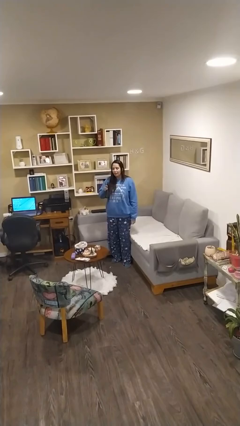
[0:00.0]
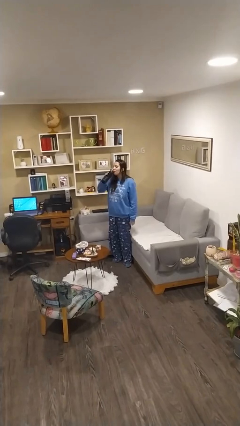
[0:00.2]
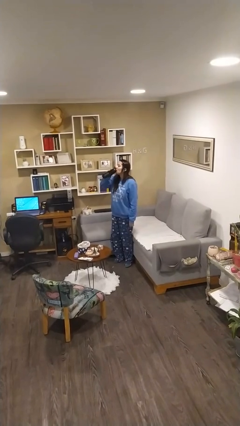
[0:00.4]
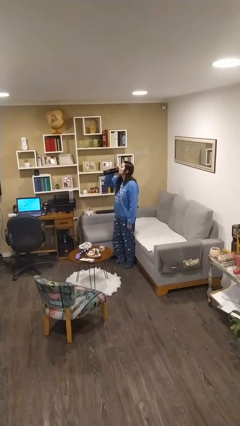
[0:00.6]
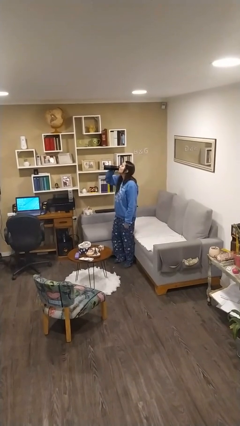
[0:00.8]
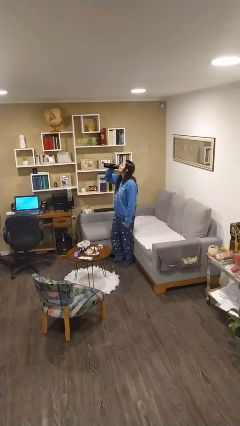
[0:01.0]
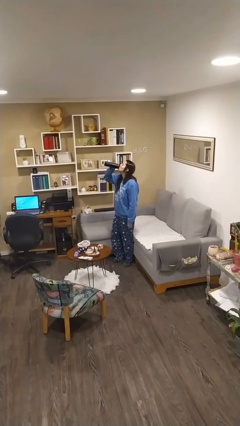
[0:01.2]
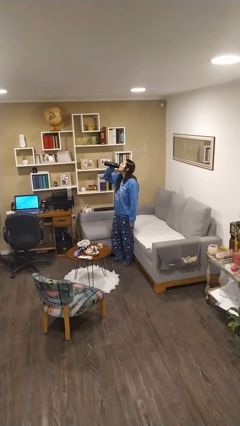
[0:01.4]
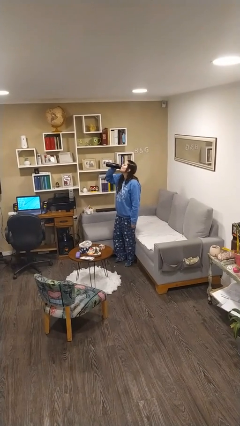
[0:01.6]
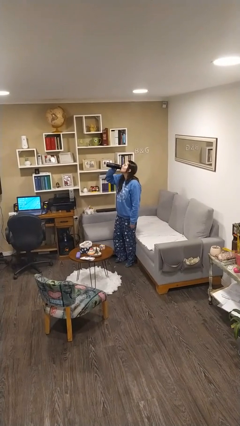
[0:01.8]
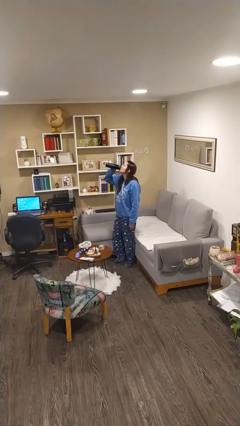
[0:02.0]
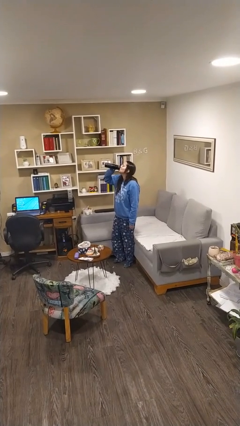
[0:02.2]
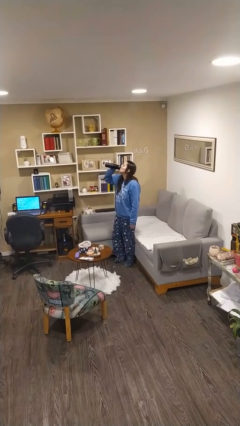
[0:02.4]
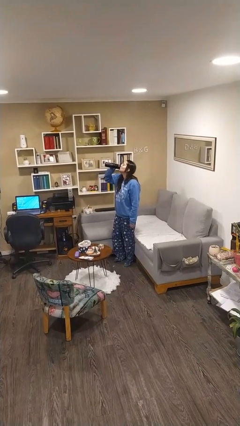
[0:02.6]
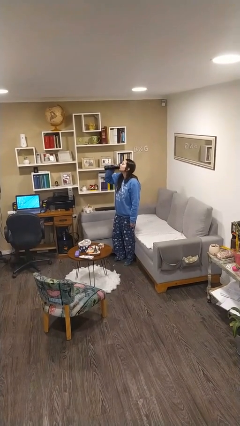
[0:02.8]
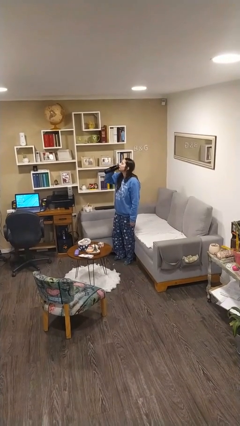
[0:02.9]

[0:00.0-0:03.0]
person drinks from bottle

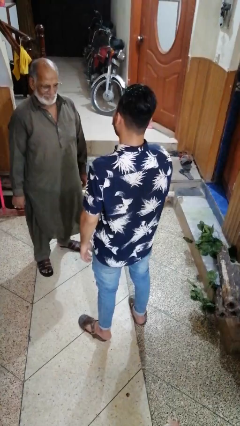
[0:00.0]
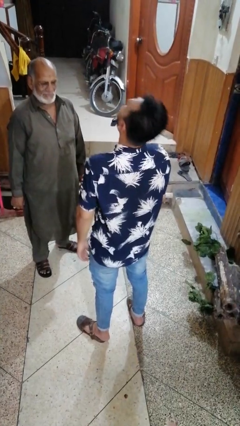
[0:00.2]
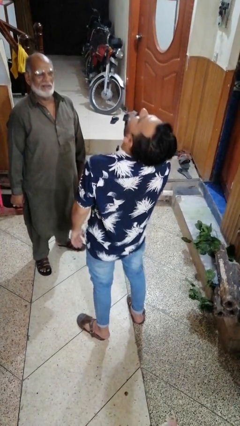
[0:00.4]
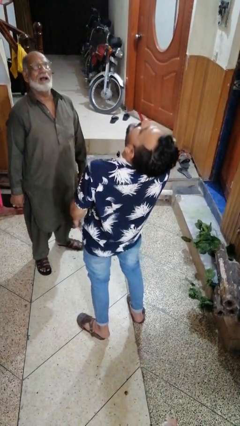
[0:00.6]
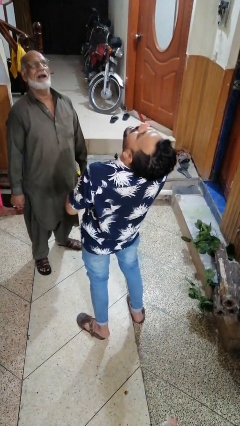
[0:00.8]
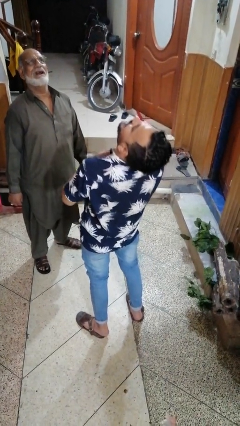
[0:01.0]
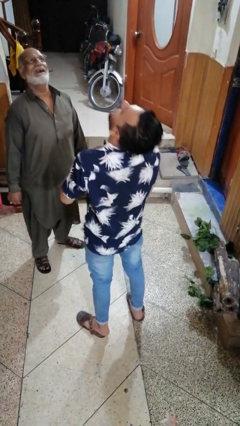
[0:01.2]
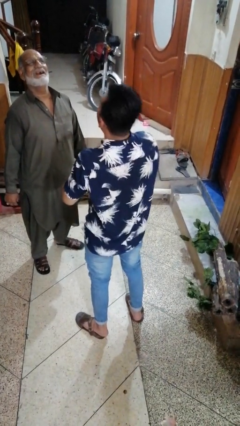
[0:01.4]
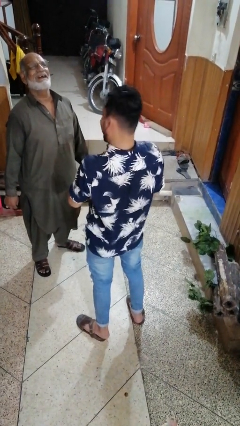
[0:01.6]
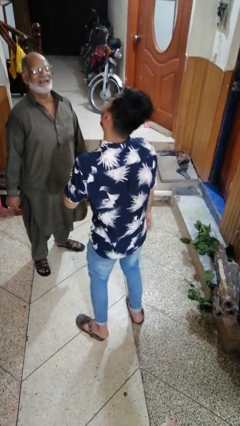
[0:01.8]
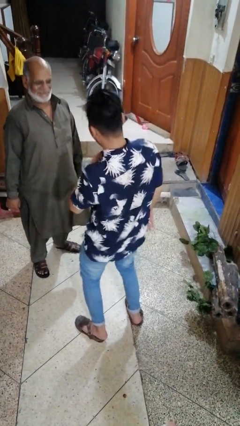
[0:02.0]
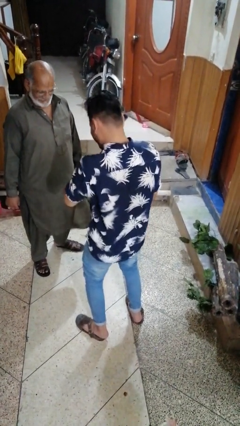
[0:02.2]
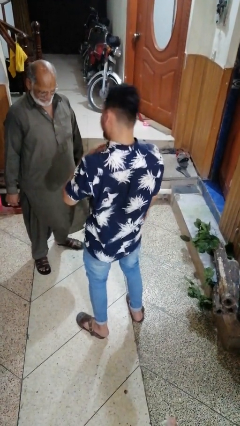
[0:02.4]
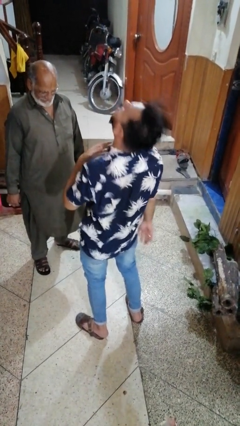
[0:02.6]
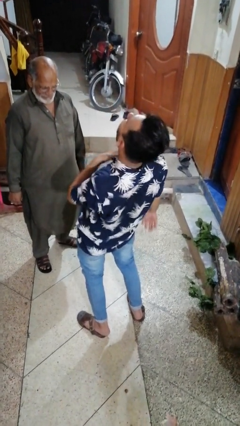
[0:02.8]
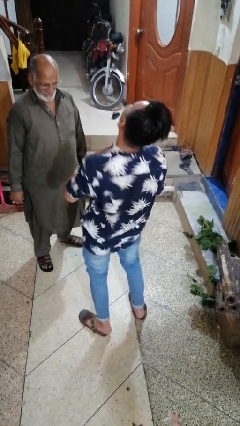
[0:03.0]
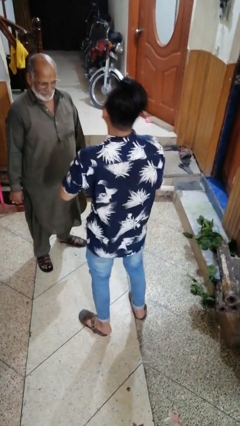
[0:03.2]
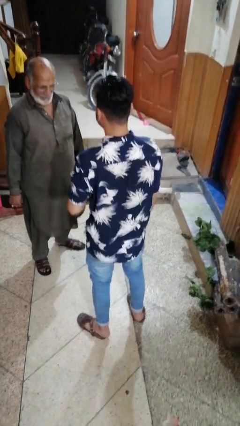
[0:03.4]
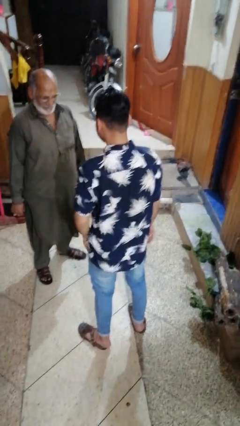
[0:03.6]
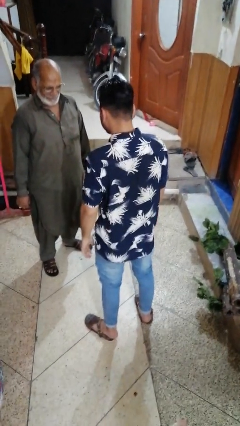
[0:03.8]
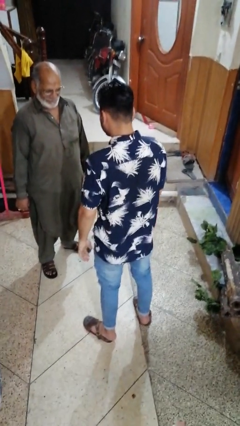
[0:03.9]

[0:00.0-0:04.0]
person laughs with person

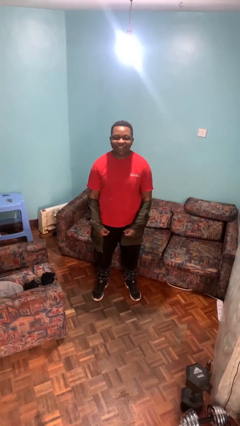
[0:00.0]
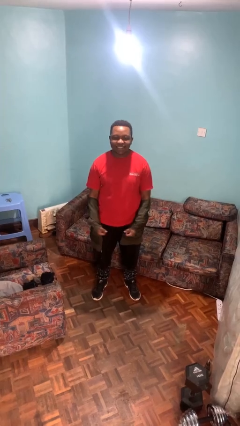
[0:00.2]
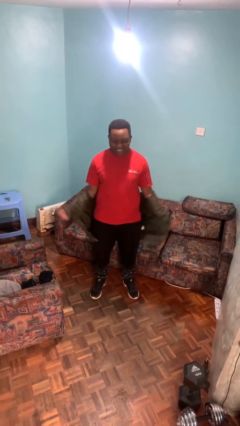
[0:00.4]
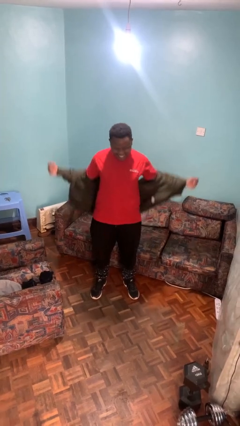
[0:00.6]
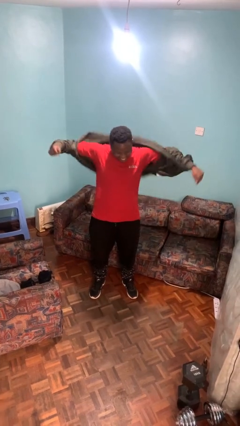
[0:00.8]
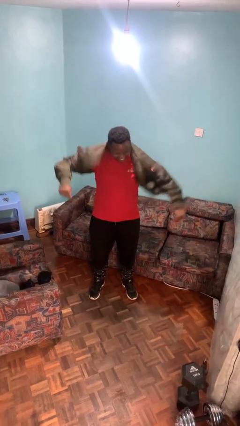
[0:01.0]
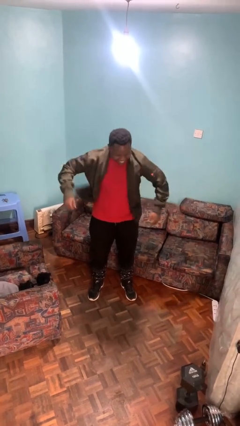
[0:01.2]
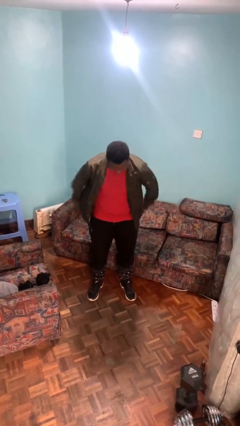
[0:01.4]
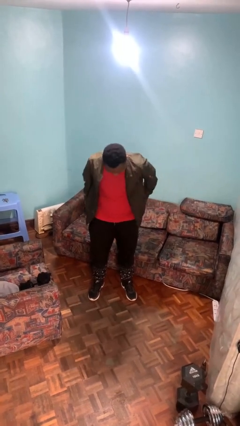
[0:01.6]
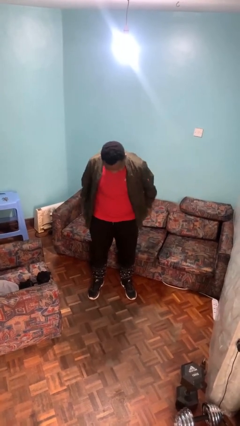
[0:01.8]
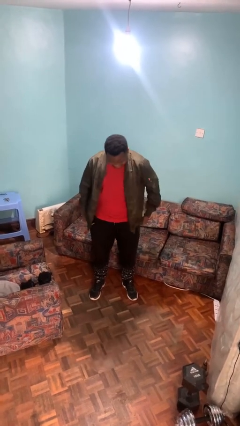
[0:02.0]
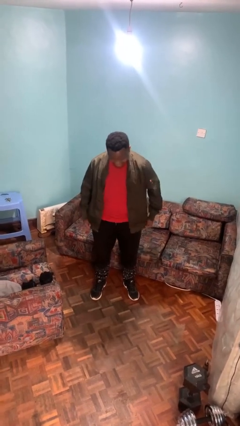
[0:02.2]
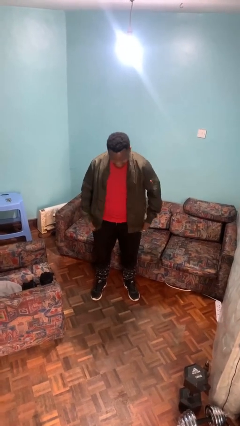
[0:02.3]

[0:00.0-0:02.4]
person puts on jacket

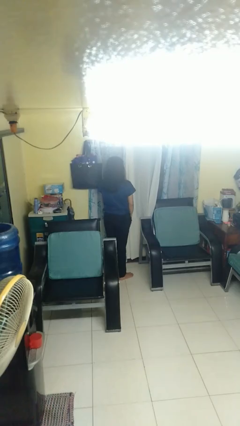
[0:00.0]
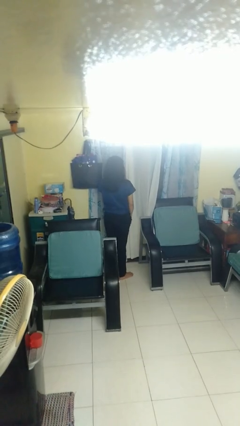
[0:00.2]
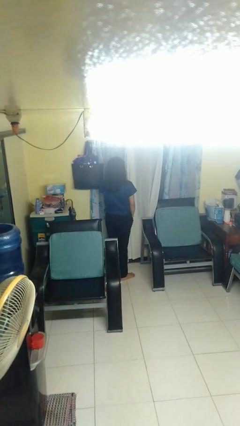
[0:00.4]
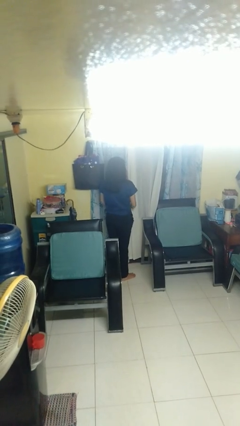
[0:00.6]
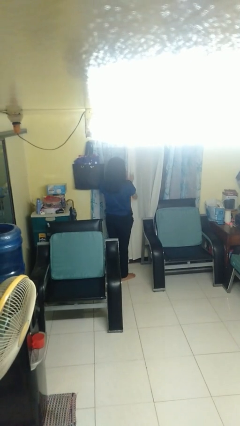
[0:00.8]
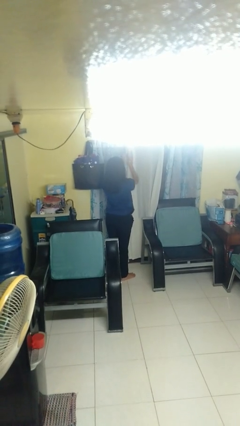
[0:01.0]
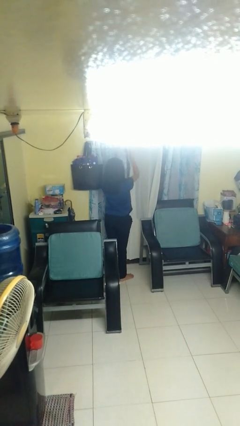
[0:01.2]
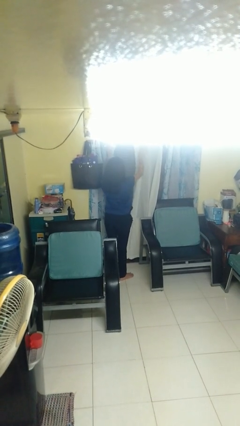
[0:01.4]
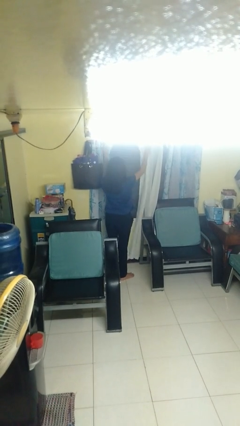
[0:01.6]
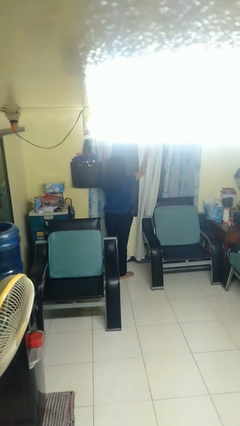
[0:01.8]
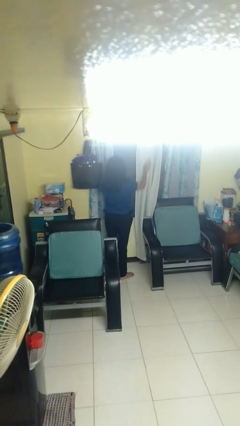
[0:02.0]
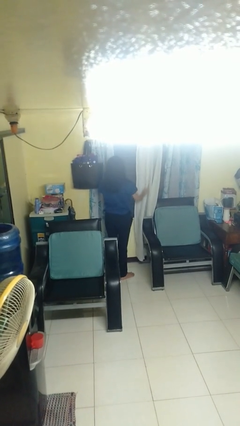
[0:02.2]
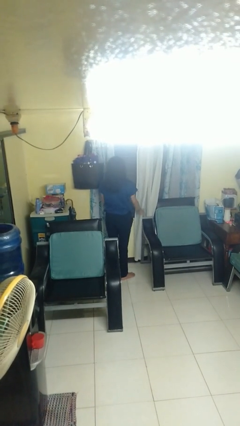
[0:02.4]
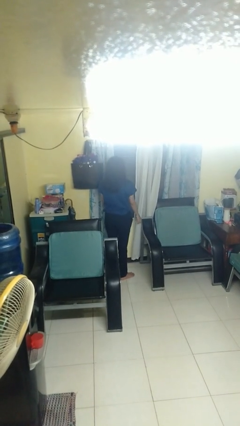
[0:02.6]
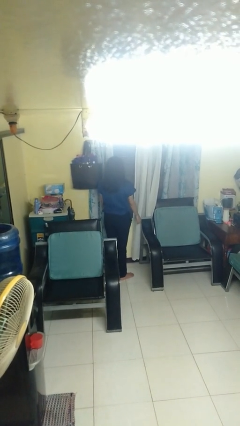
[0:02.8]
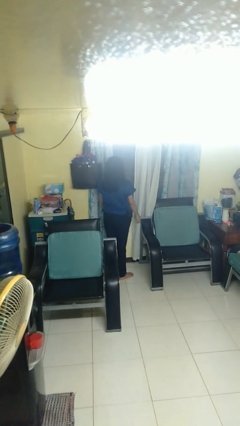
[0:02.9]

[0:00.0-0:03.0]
person opens curtains

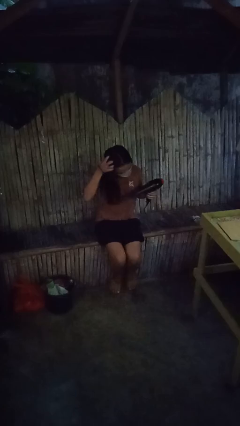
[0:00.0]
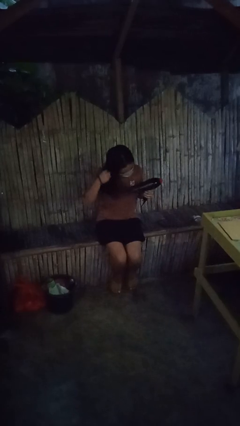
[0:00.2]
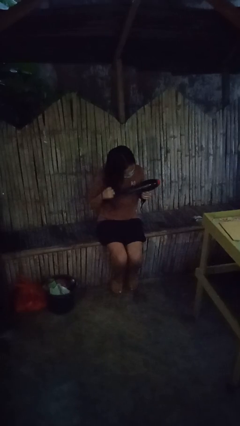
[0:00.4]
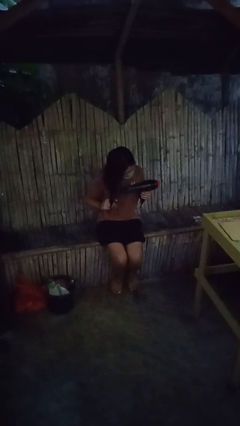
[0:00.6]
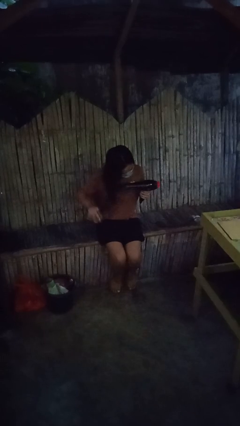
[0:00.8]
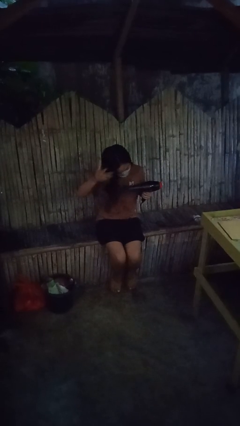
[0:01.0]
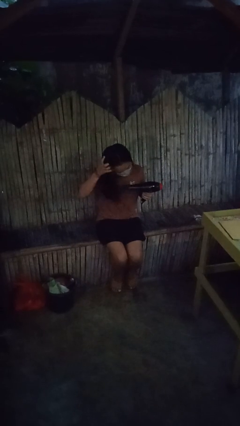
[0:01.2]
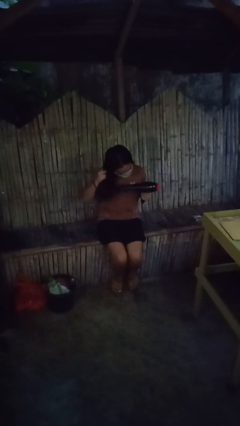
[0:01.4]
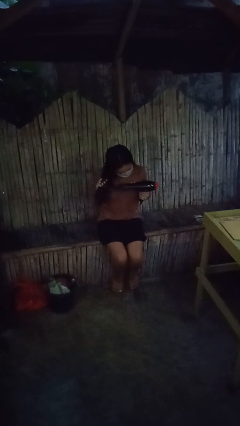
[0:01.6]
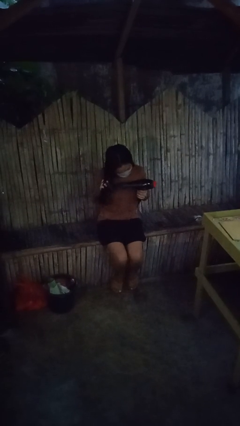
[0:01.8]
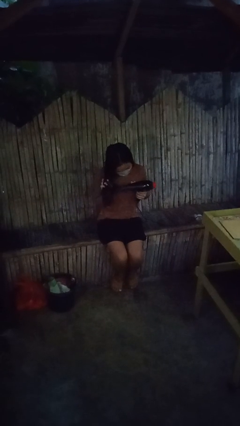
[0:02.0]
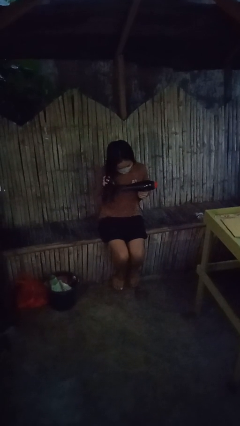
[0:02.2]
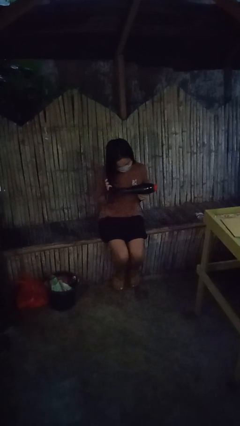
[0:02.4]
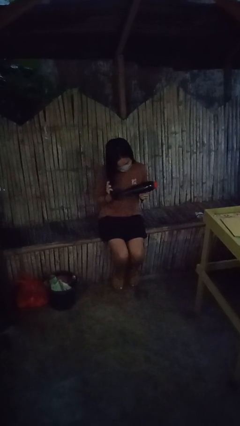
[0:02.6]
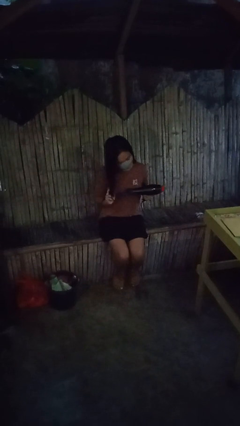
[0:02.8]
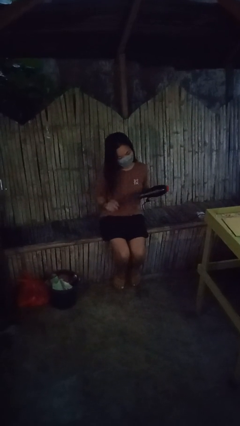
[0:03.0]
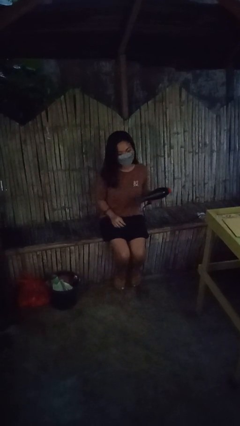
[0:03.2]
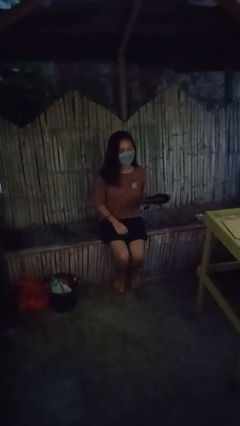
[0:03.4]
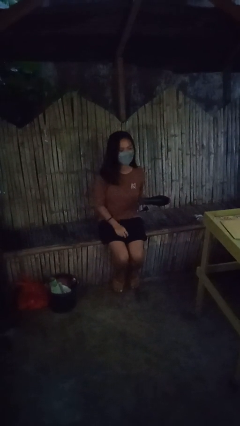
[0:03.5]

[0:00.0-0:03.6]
person dries hair with hairdryer

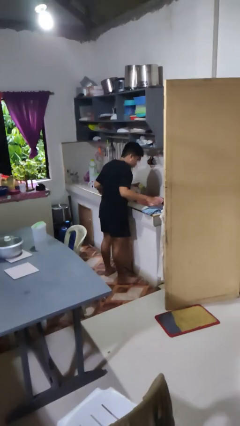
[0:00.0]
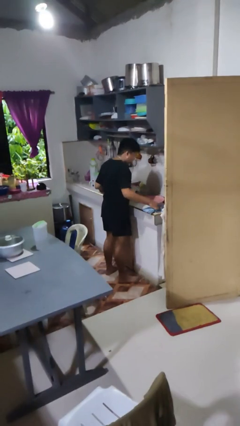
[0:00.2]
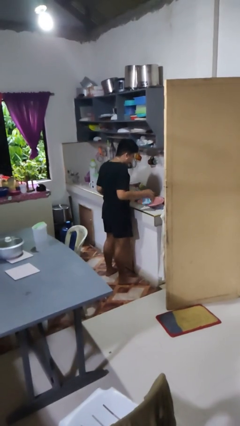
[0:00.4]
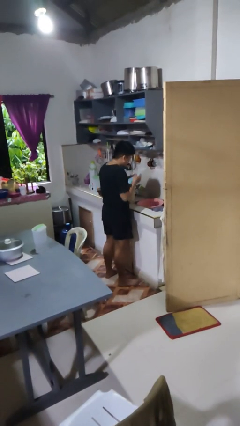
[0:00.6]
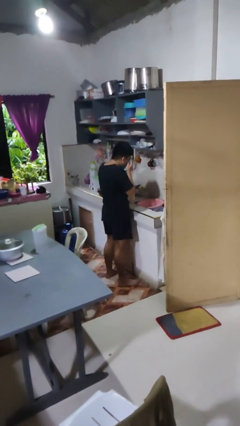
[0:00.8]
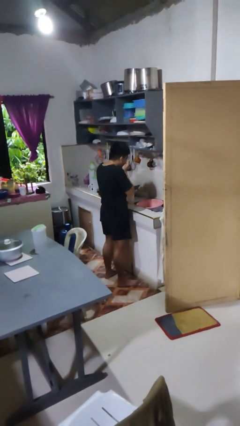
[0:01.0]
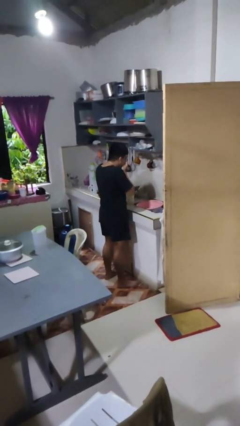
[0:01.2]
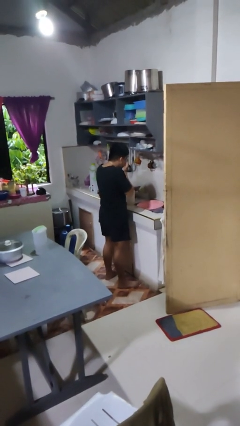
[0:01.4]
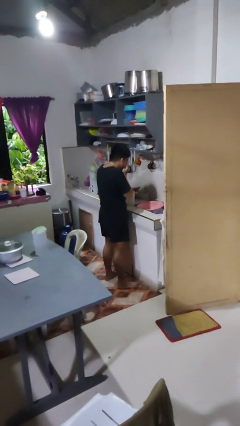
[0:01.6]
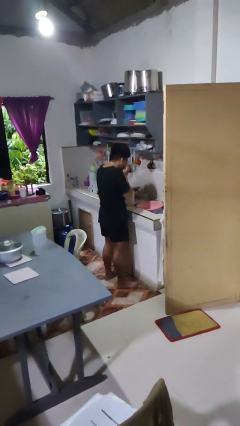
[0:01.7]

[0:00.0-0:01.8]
person dries face with towel
